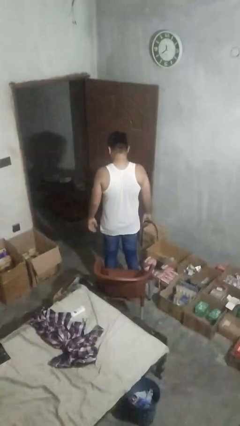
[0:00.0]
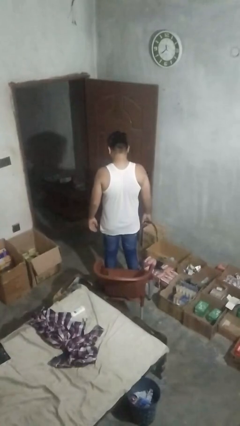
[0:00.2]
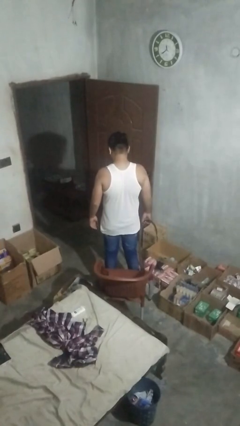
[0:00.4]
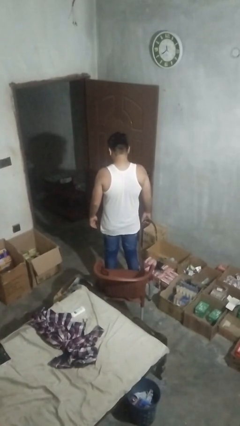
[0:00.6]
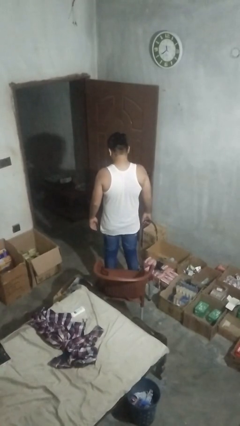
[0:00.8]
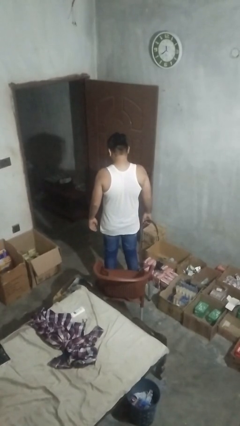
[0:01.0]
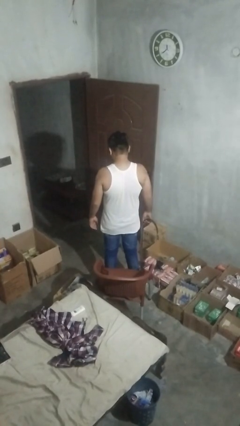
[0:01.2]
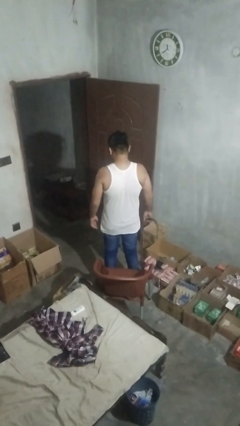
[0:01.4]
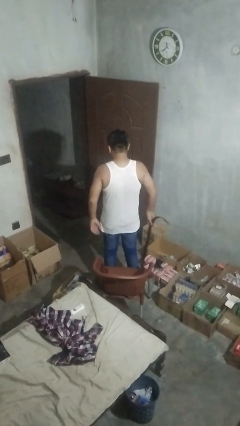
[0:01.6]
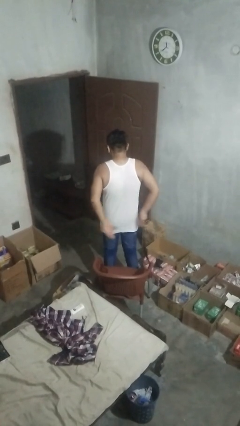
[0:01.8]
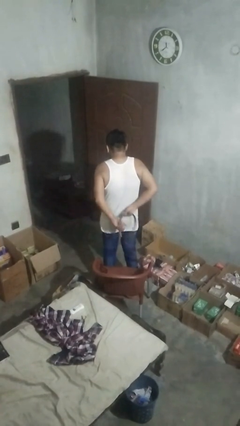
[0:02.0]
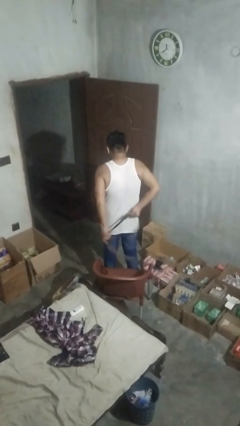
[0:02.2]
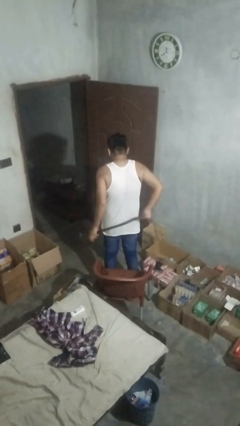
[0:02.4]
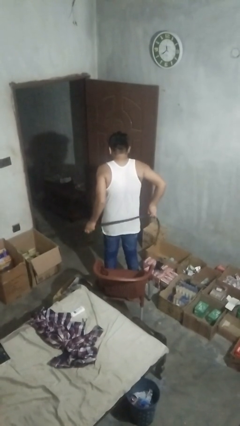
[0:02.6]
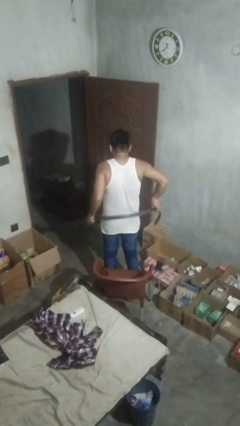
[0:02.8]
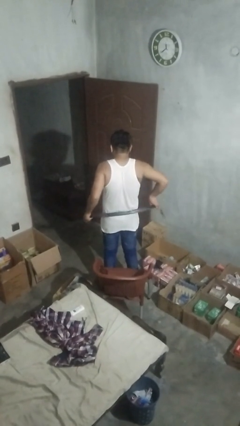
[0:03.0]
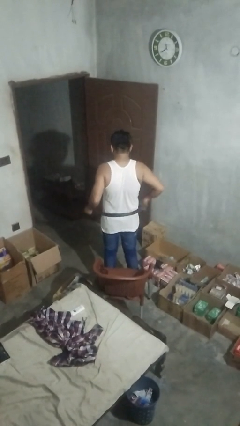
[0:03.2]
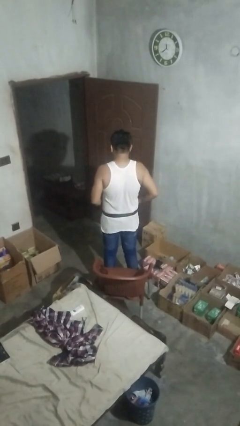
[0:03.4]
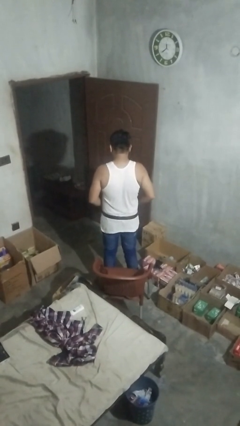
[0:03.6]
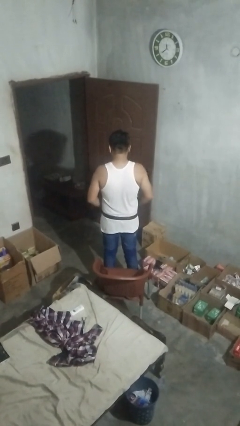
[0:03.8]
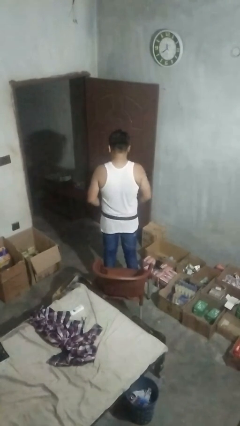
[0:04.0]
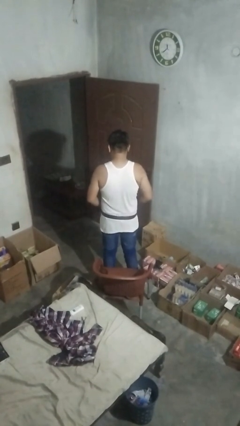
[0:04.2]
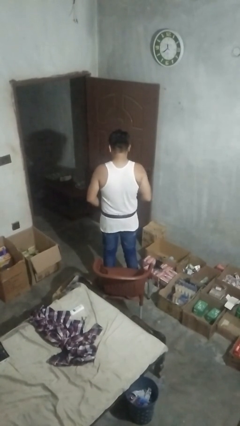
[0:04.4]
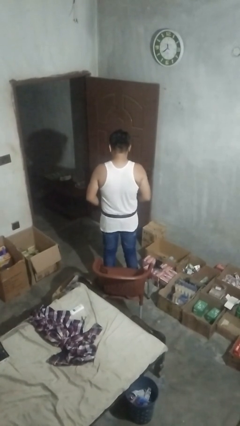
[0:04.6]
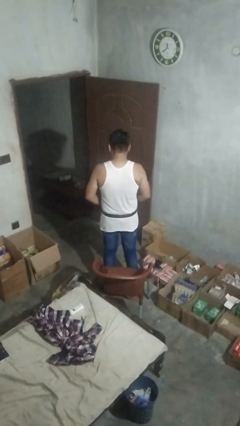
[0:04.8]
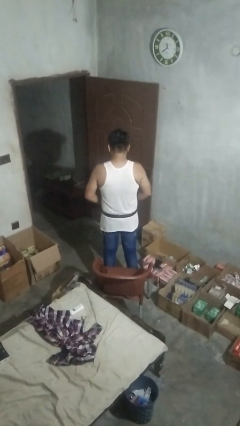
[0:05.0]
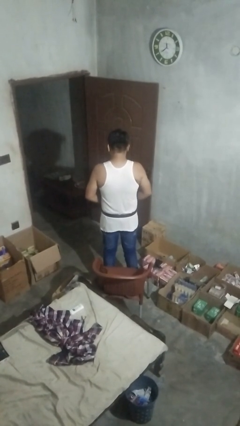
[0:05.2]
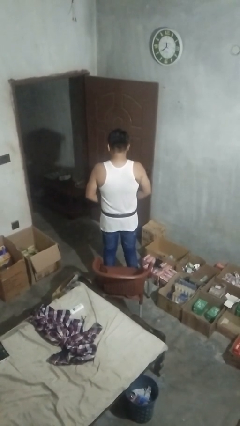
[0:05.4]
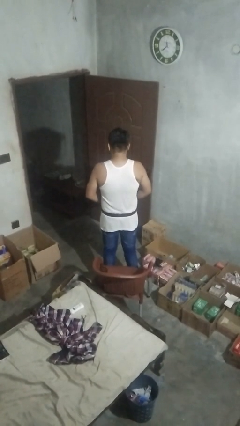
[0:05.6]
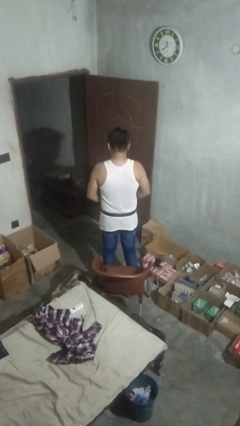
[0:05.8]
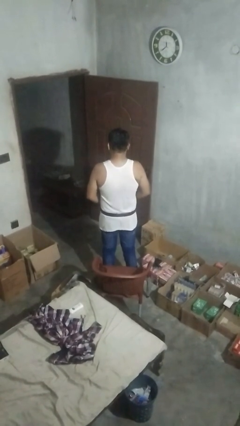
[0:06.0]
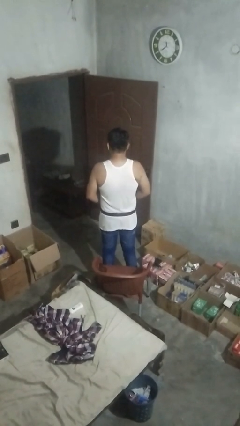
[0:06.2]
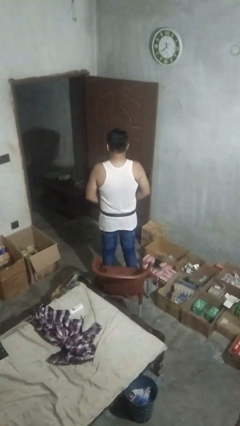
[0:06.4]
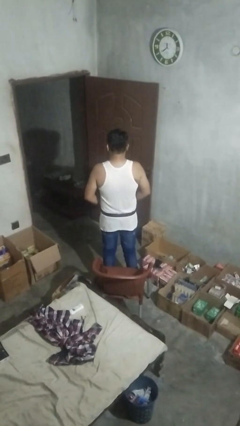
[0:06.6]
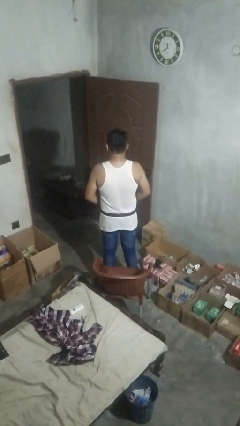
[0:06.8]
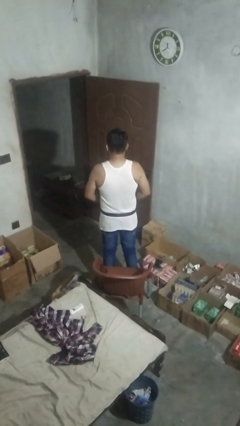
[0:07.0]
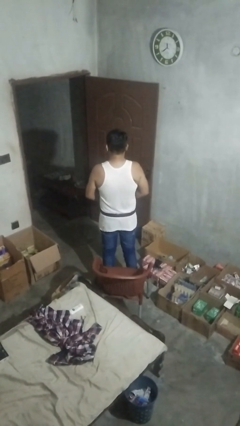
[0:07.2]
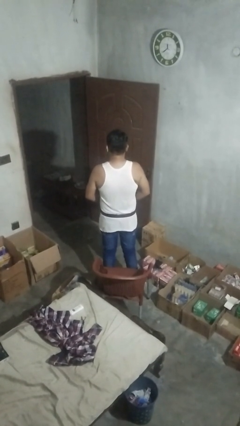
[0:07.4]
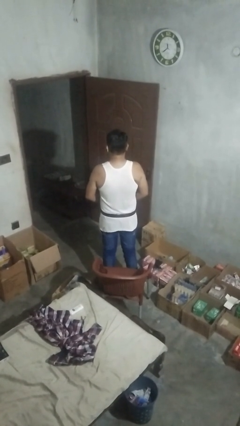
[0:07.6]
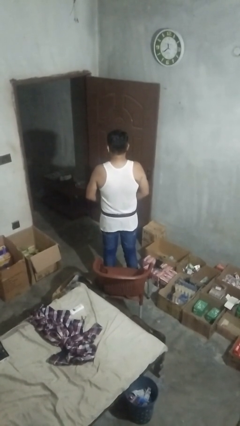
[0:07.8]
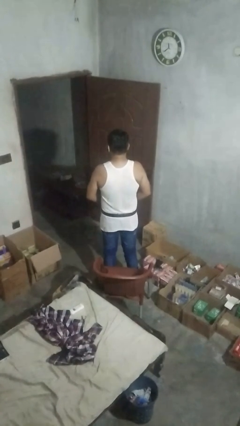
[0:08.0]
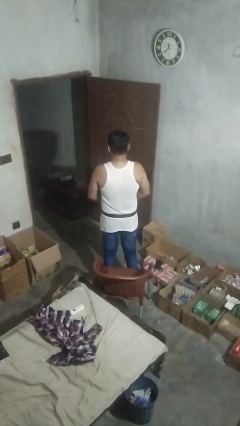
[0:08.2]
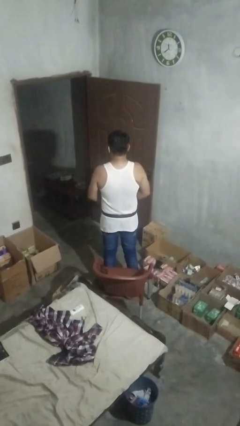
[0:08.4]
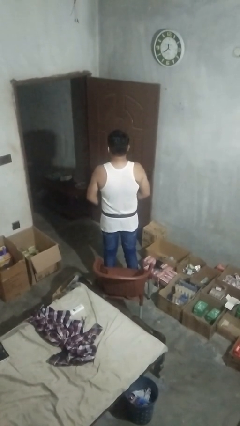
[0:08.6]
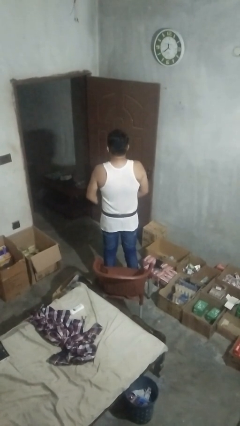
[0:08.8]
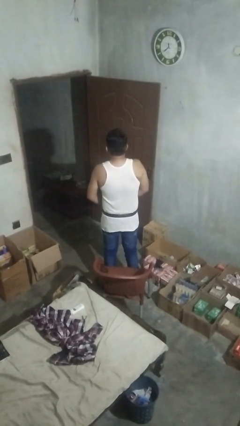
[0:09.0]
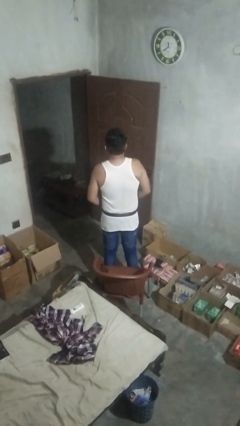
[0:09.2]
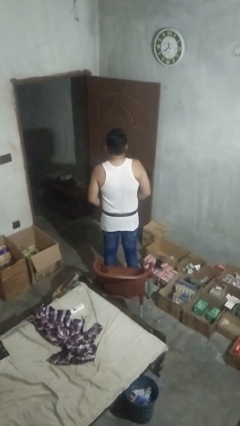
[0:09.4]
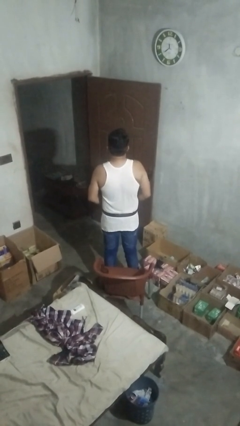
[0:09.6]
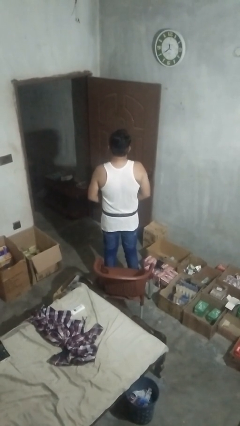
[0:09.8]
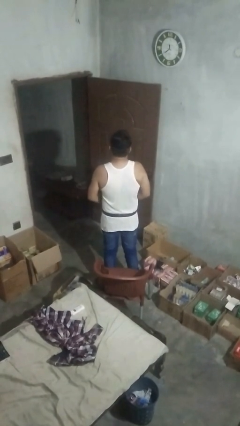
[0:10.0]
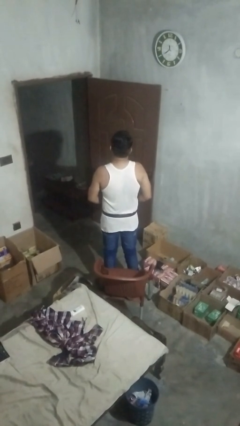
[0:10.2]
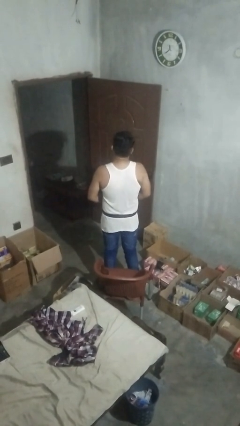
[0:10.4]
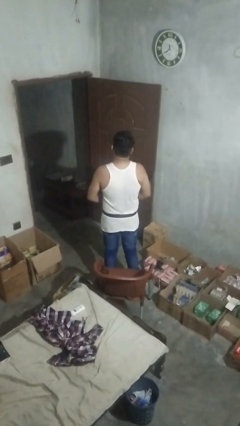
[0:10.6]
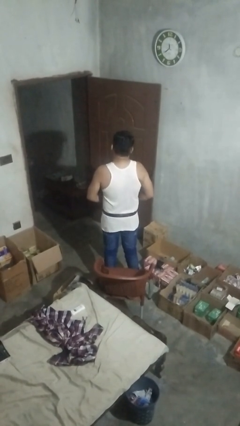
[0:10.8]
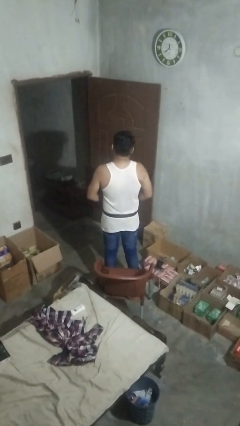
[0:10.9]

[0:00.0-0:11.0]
person puts on belt

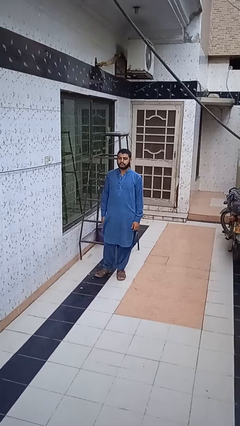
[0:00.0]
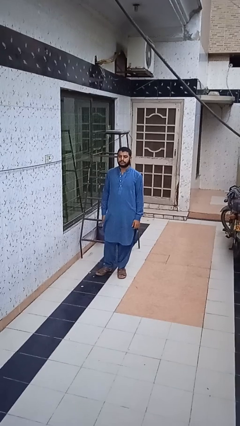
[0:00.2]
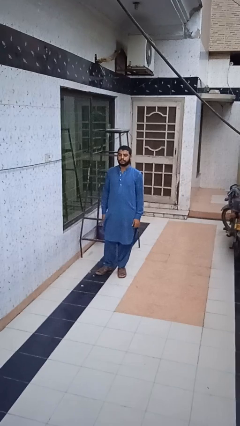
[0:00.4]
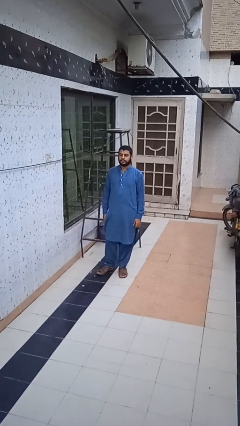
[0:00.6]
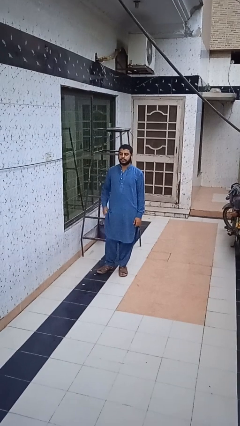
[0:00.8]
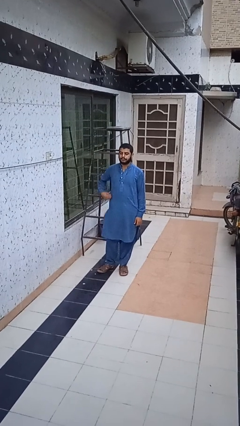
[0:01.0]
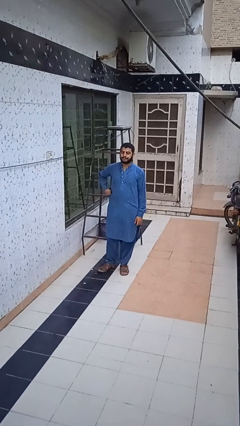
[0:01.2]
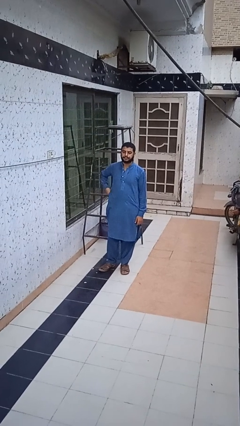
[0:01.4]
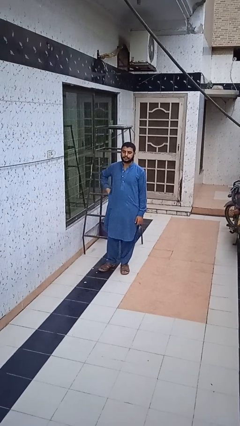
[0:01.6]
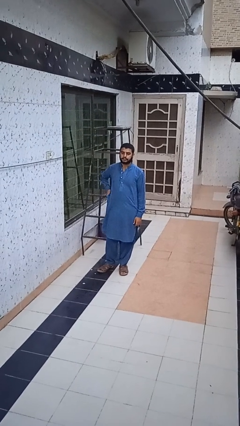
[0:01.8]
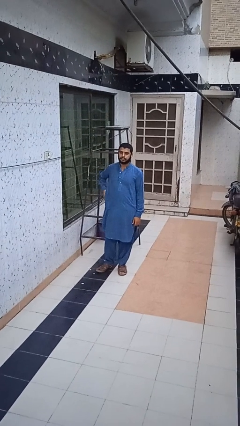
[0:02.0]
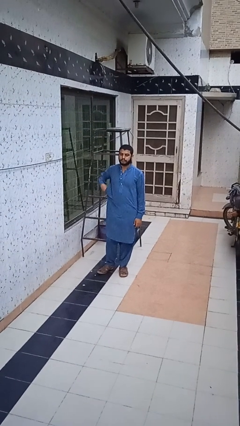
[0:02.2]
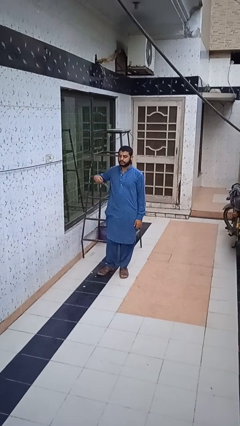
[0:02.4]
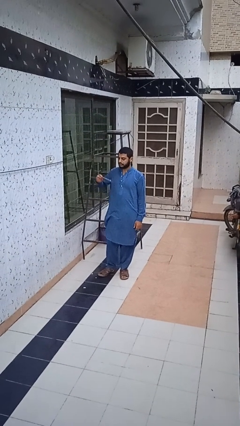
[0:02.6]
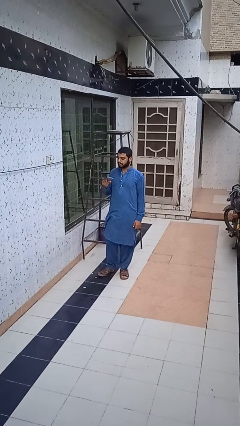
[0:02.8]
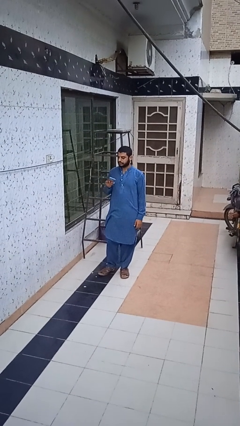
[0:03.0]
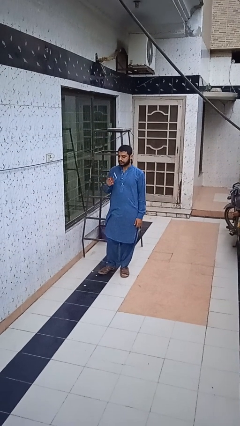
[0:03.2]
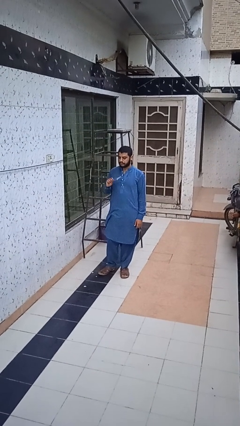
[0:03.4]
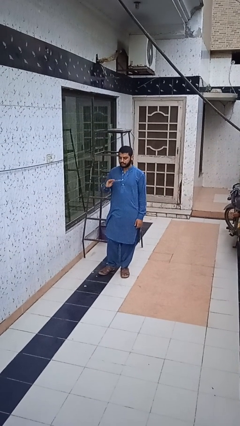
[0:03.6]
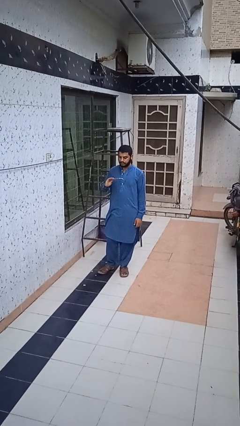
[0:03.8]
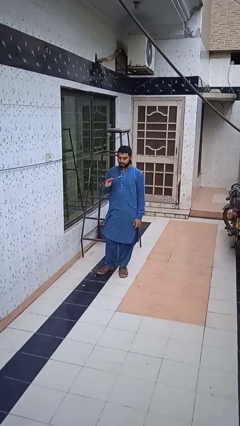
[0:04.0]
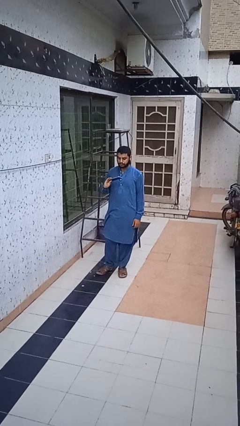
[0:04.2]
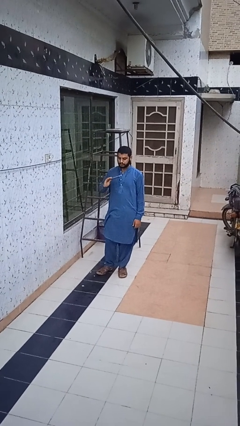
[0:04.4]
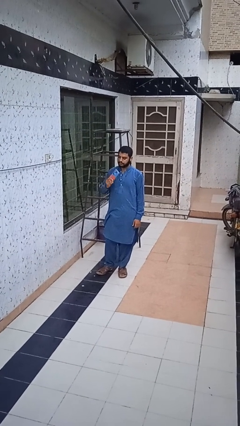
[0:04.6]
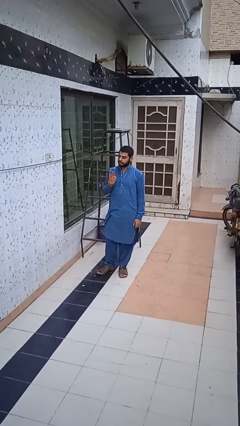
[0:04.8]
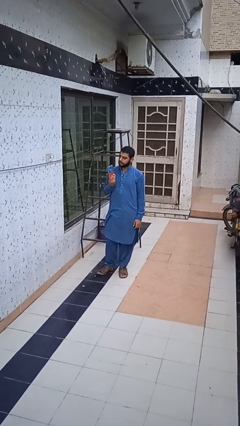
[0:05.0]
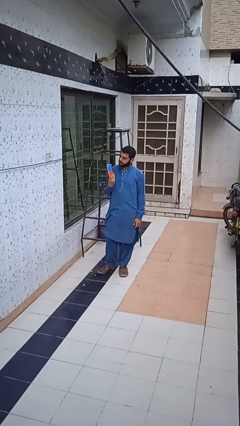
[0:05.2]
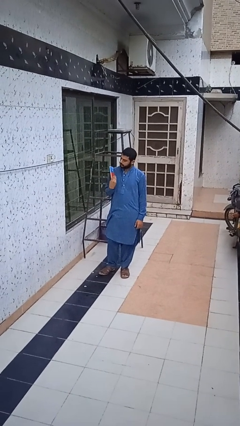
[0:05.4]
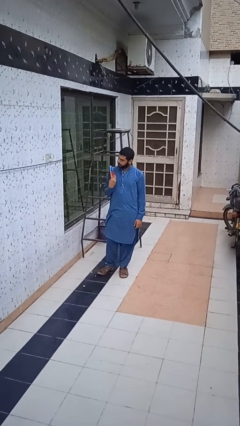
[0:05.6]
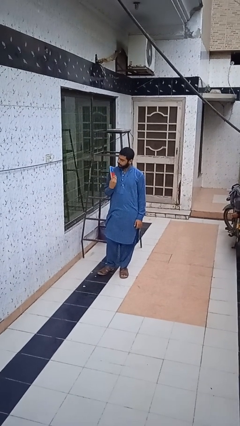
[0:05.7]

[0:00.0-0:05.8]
person takes phone from pocket

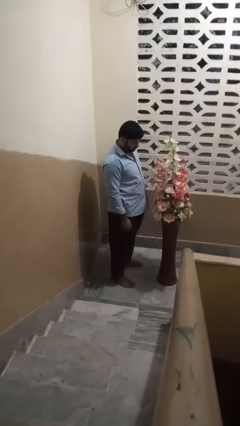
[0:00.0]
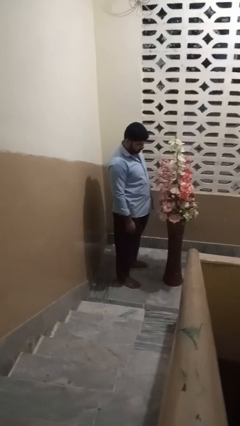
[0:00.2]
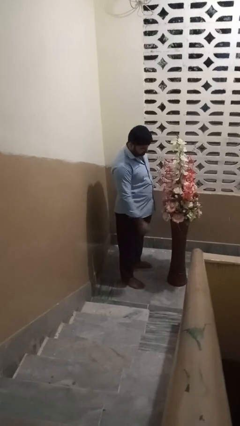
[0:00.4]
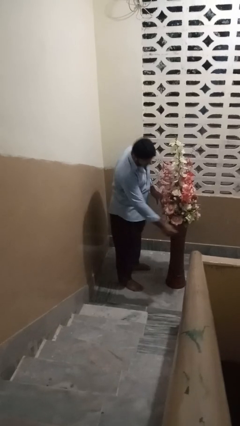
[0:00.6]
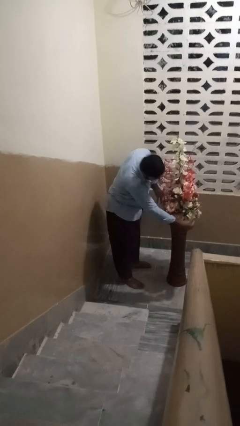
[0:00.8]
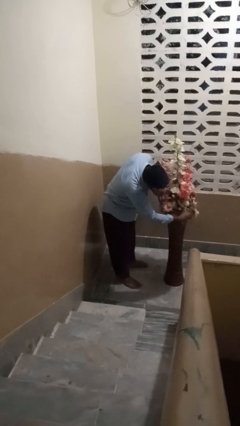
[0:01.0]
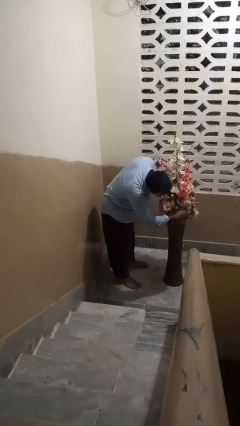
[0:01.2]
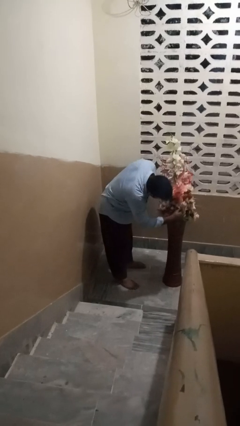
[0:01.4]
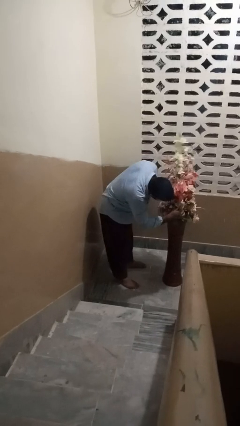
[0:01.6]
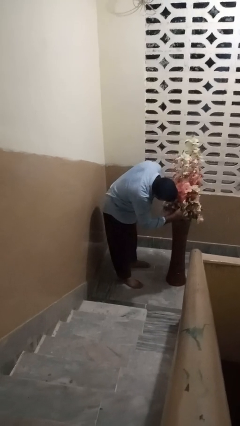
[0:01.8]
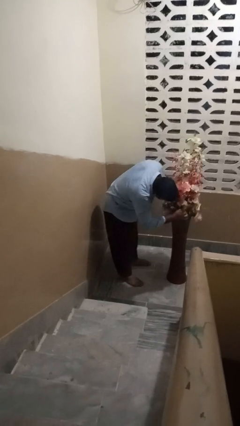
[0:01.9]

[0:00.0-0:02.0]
person arranges flowers in vase
